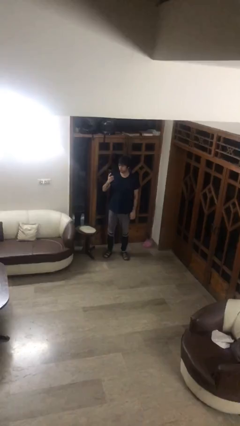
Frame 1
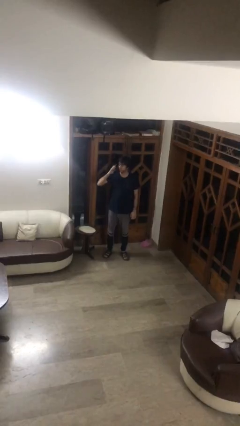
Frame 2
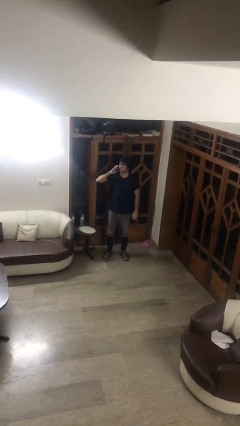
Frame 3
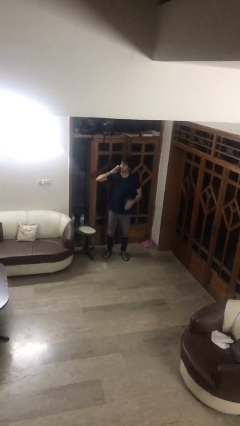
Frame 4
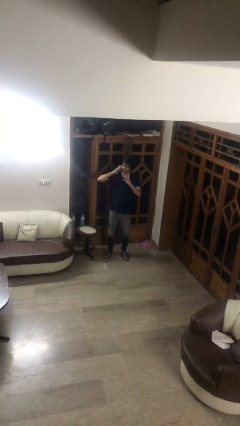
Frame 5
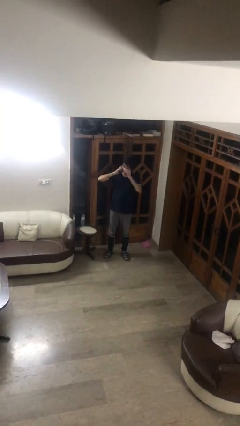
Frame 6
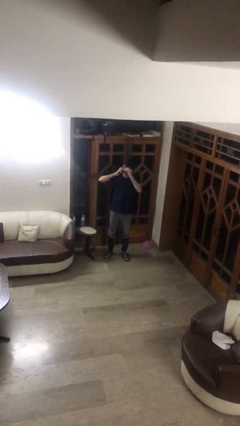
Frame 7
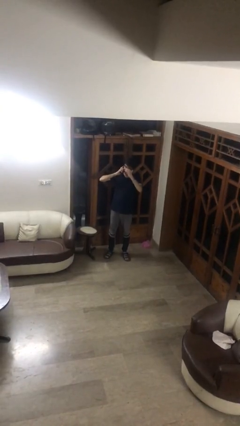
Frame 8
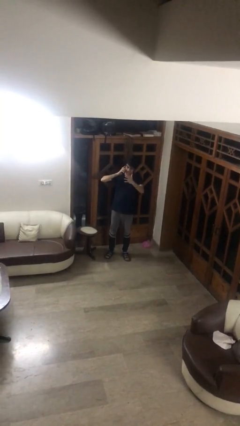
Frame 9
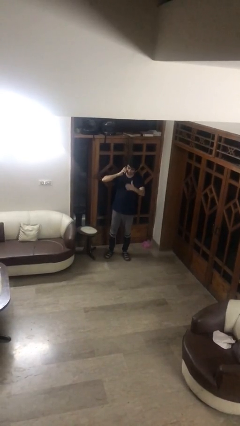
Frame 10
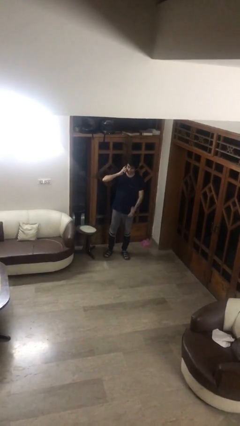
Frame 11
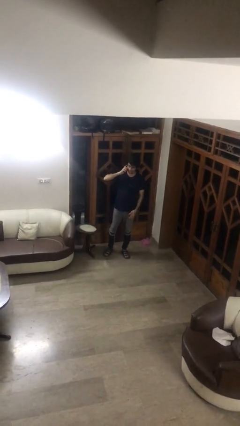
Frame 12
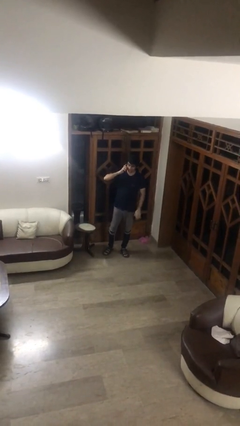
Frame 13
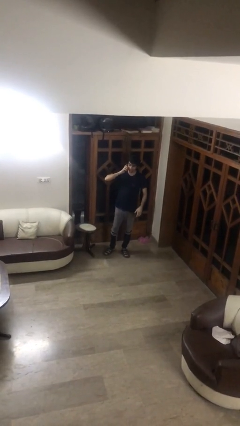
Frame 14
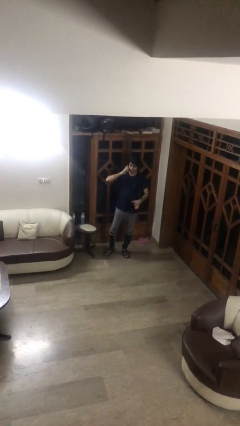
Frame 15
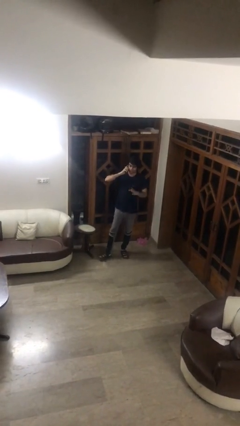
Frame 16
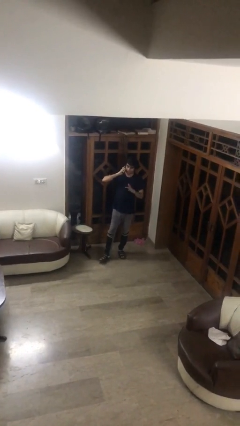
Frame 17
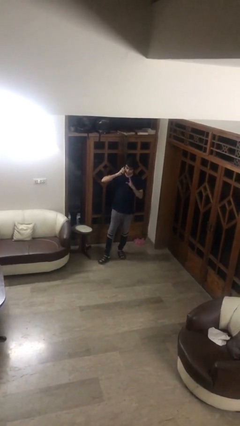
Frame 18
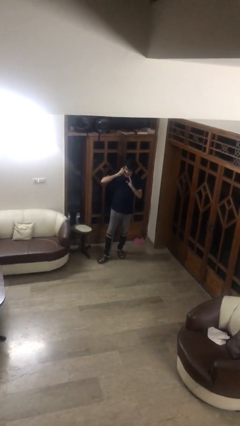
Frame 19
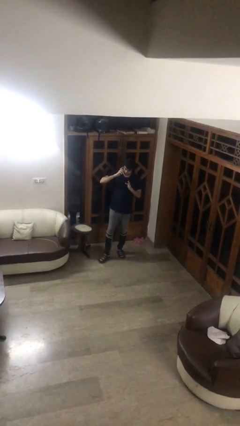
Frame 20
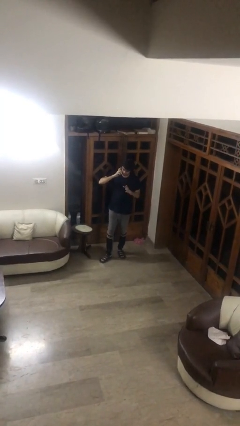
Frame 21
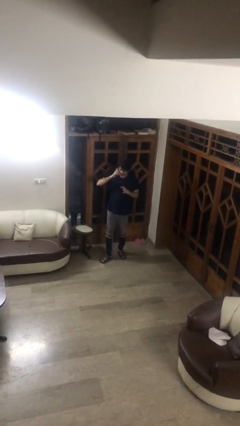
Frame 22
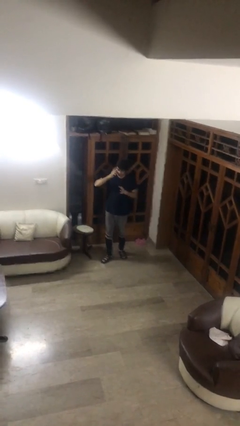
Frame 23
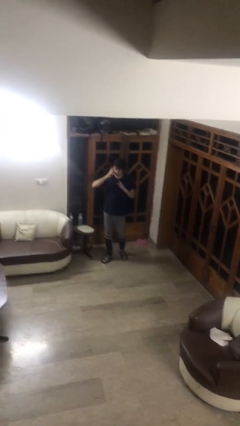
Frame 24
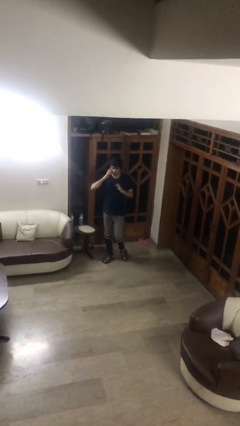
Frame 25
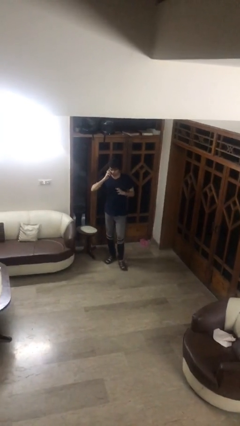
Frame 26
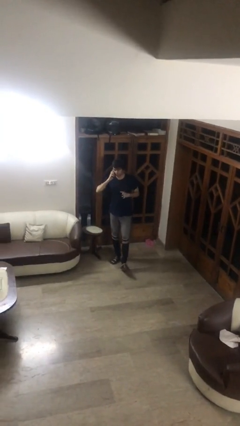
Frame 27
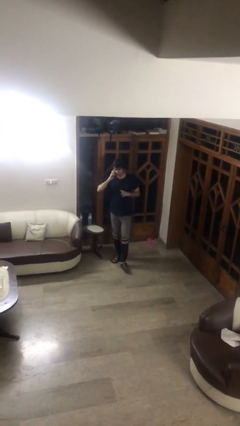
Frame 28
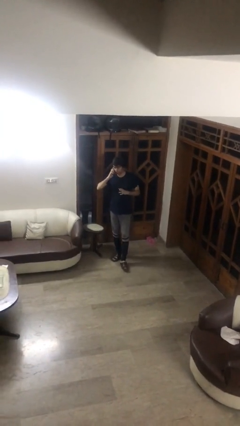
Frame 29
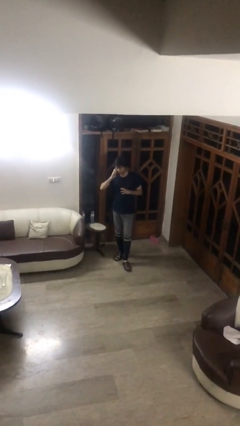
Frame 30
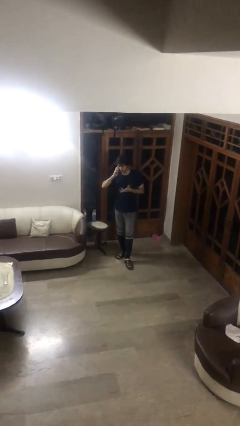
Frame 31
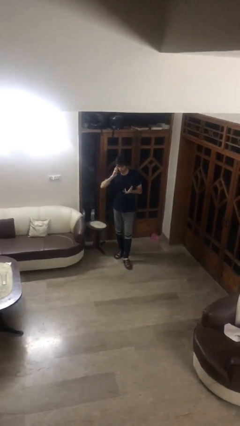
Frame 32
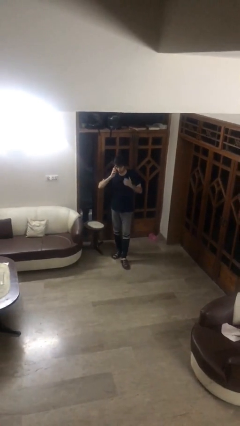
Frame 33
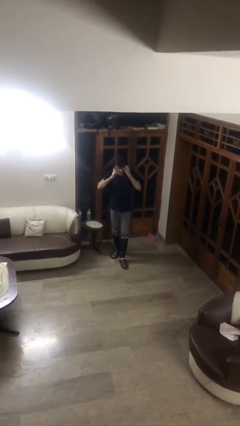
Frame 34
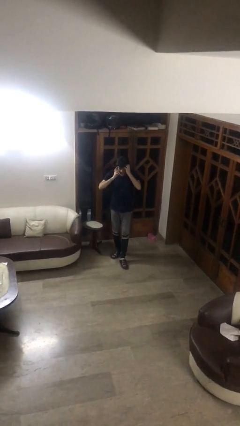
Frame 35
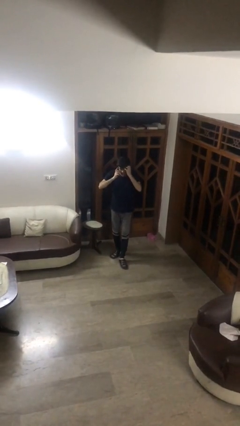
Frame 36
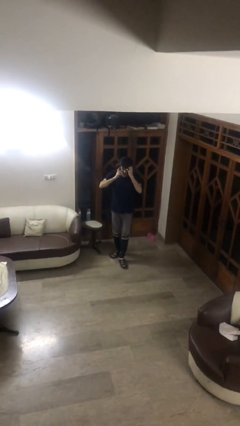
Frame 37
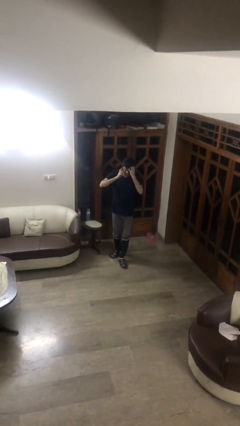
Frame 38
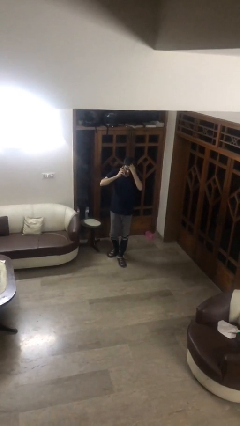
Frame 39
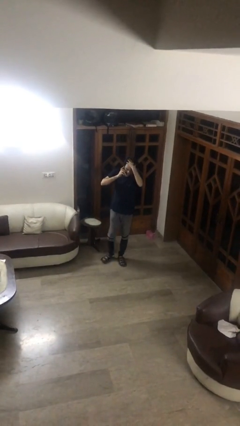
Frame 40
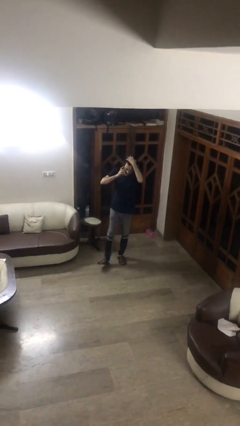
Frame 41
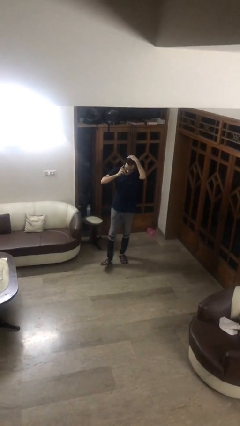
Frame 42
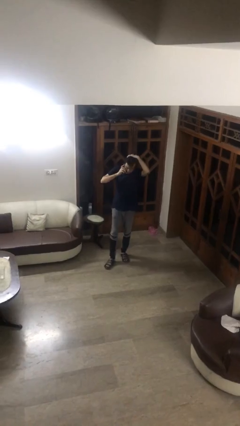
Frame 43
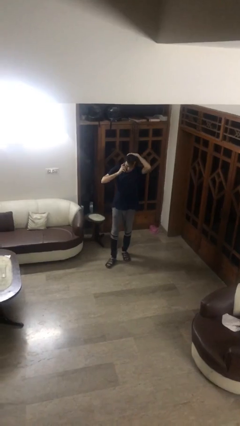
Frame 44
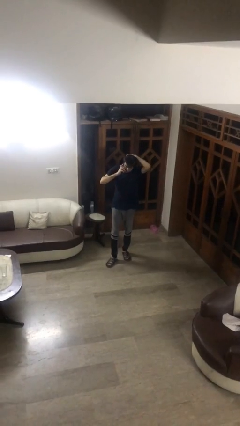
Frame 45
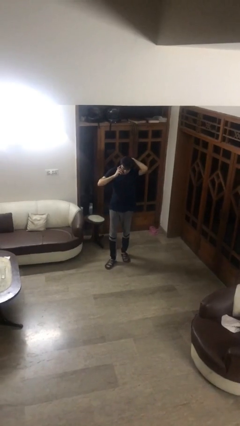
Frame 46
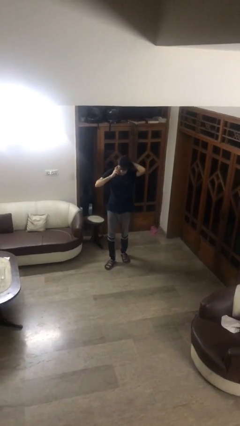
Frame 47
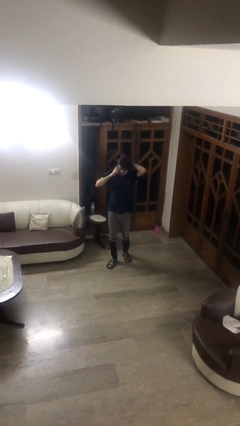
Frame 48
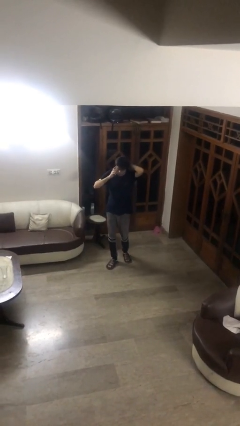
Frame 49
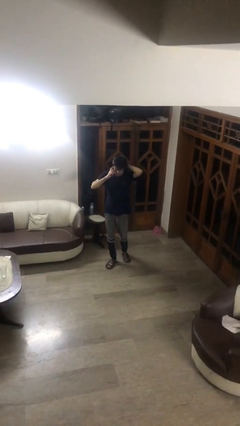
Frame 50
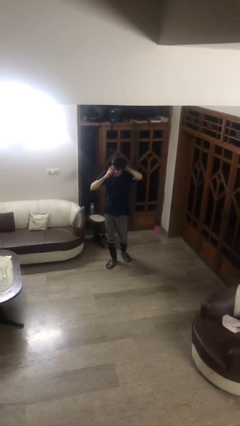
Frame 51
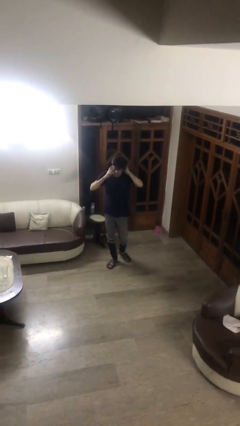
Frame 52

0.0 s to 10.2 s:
person talks on phone

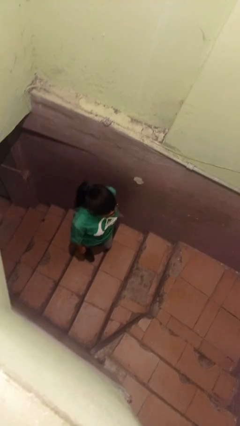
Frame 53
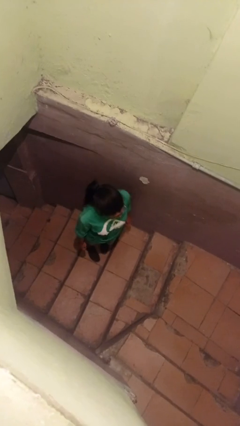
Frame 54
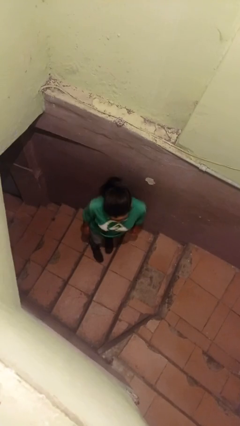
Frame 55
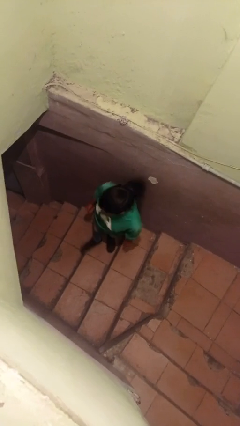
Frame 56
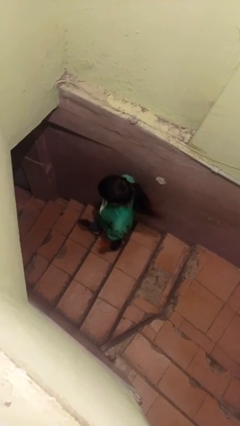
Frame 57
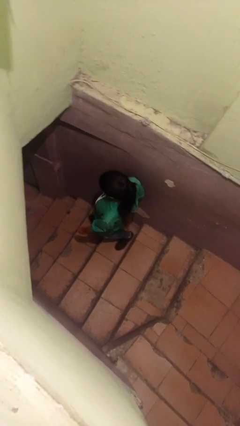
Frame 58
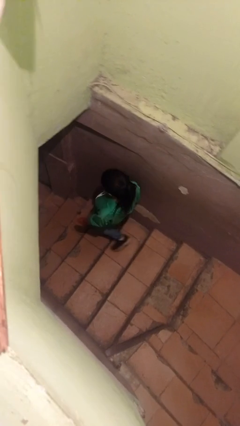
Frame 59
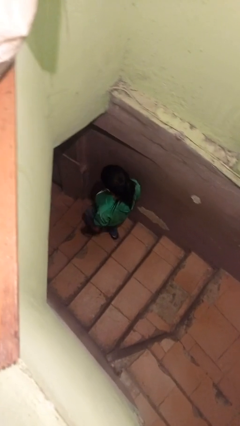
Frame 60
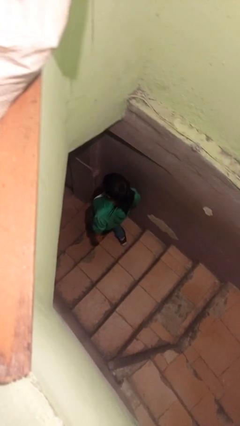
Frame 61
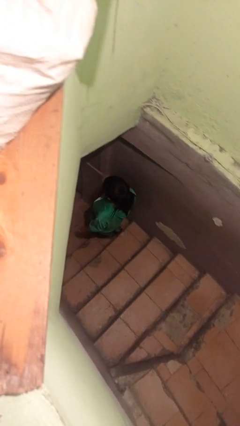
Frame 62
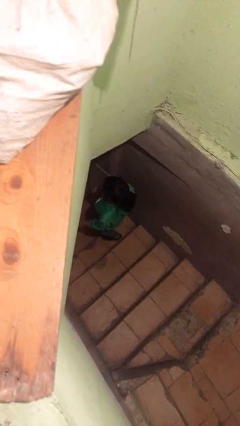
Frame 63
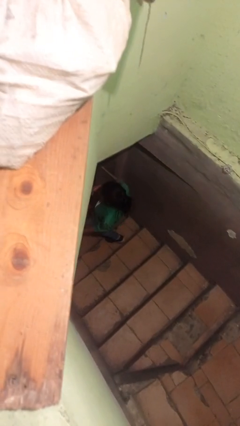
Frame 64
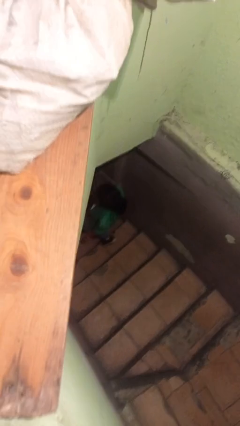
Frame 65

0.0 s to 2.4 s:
person climbs down stairs

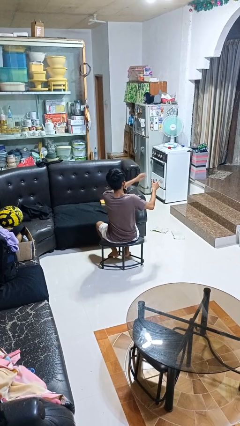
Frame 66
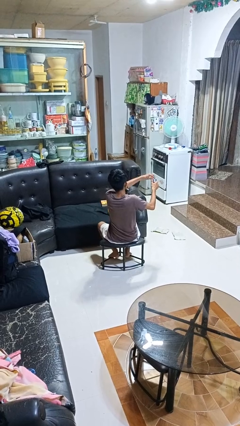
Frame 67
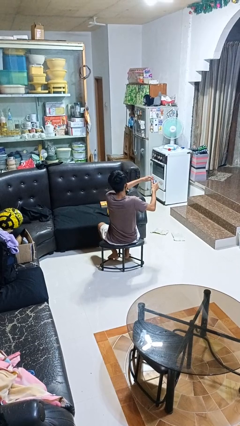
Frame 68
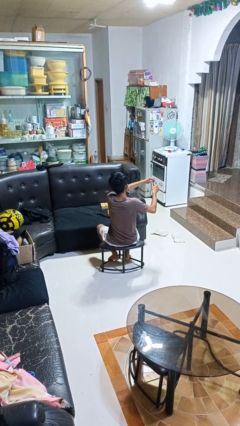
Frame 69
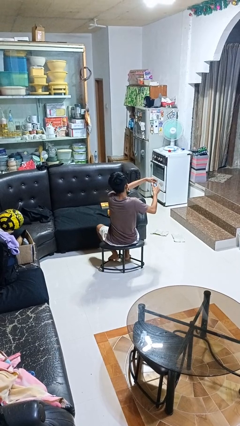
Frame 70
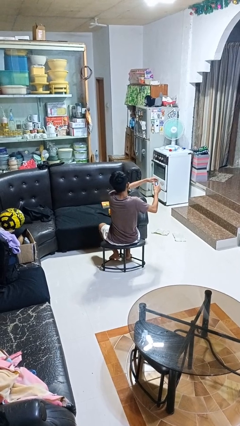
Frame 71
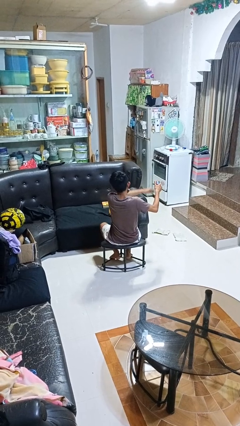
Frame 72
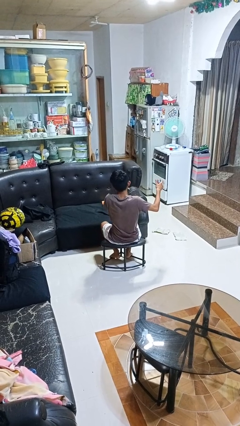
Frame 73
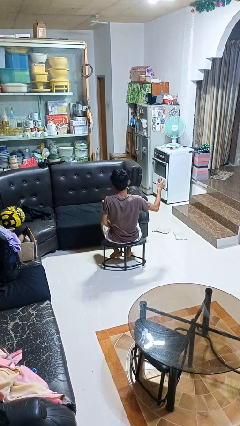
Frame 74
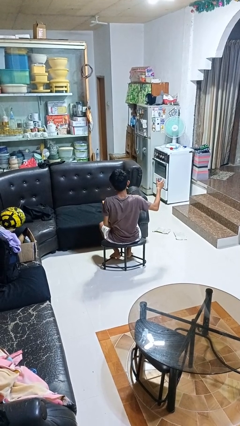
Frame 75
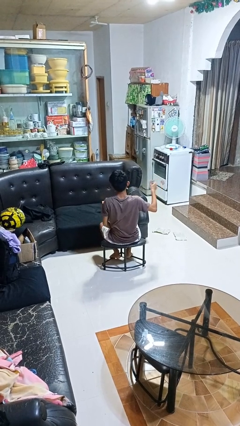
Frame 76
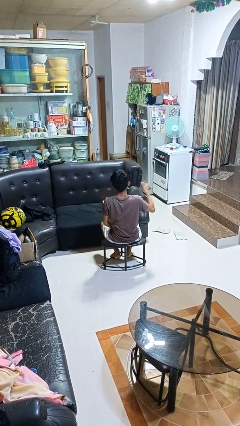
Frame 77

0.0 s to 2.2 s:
person opens beverage can

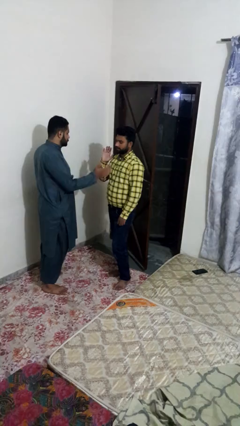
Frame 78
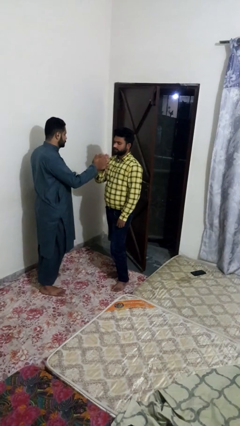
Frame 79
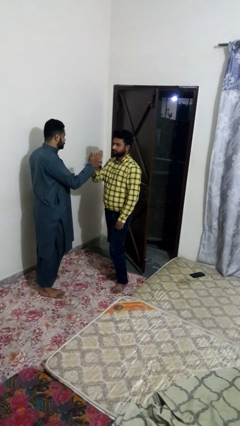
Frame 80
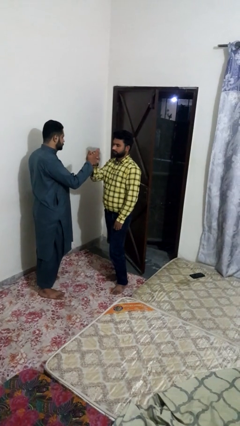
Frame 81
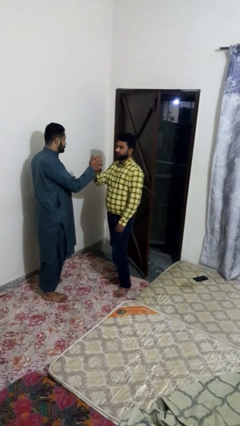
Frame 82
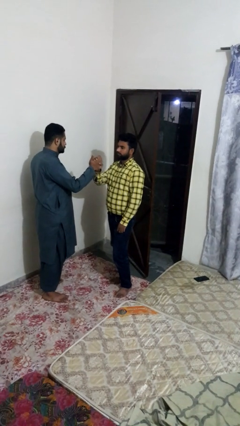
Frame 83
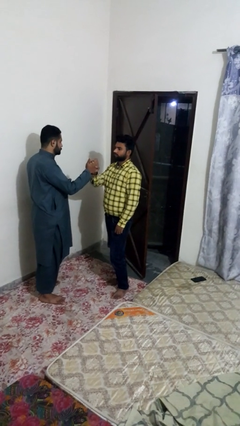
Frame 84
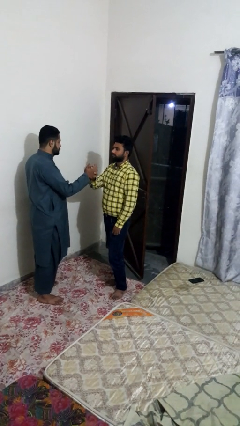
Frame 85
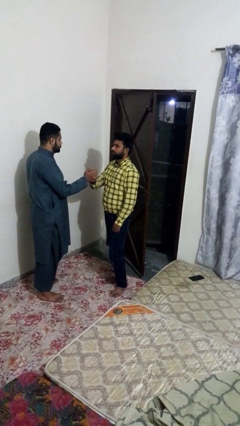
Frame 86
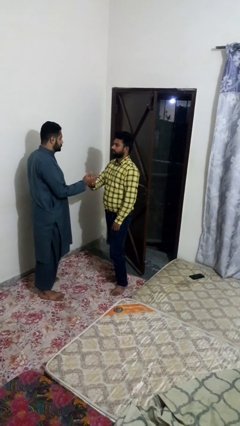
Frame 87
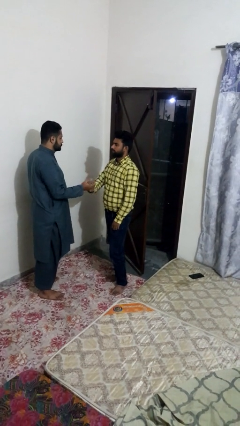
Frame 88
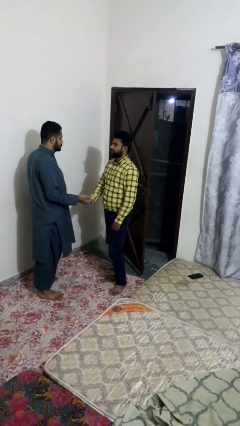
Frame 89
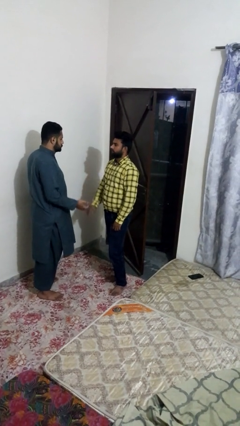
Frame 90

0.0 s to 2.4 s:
person highfives hand

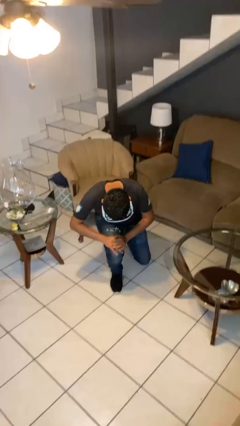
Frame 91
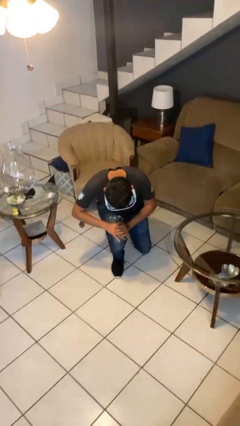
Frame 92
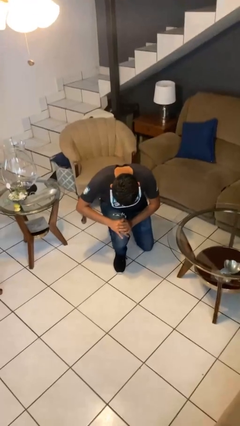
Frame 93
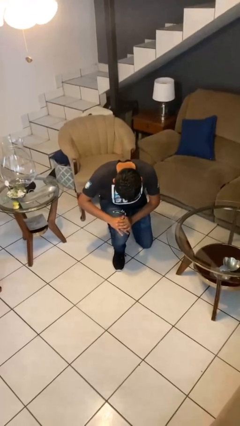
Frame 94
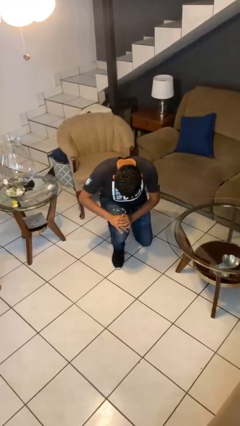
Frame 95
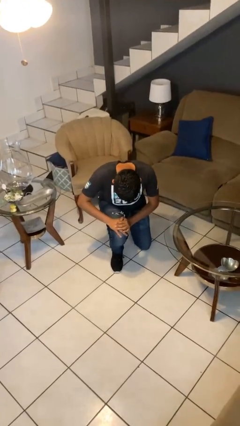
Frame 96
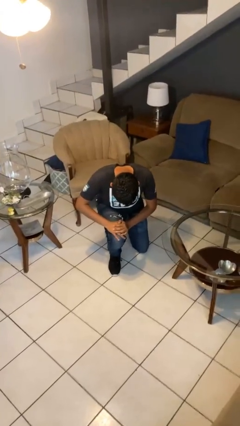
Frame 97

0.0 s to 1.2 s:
person kneels
